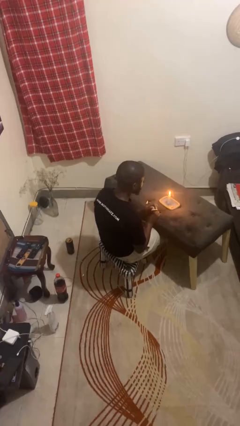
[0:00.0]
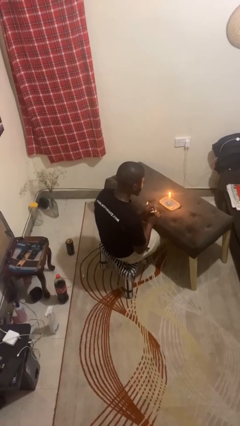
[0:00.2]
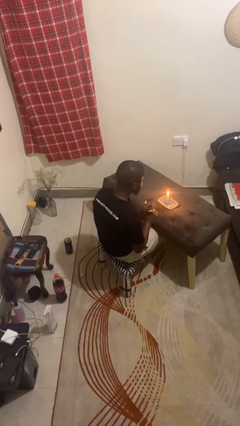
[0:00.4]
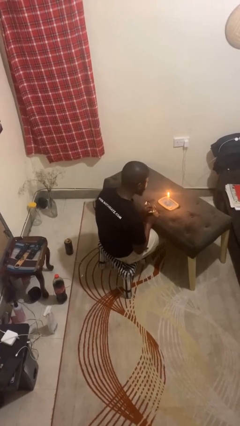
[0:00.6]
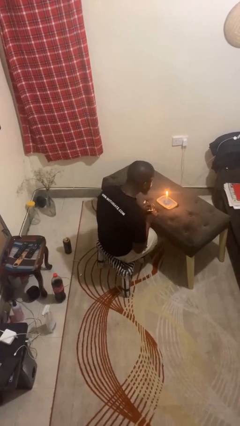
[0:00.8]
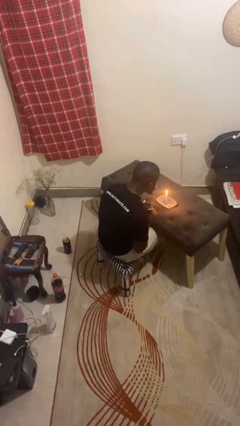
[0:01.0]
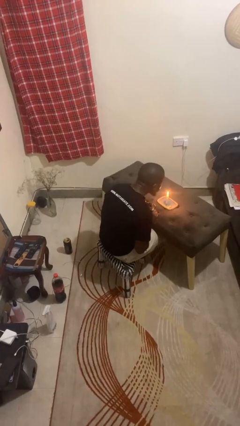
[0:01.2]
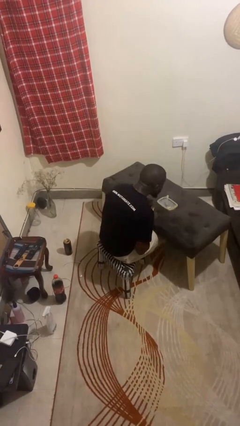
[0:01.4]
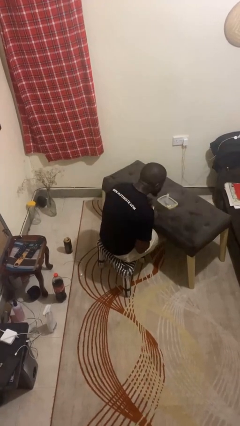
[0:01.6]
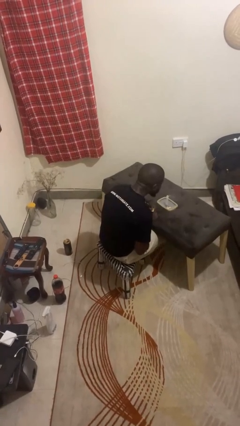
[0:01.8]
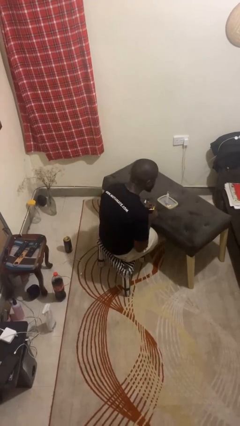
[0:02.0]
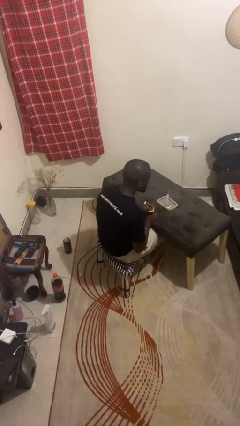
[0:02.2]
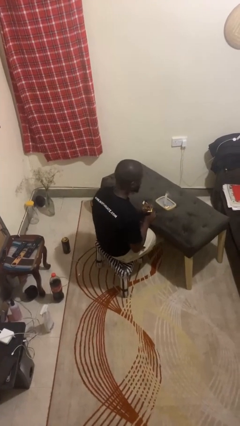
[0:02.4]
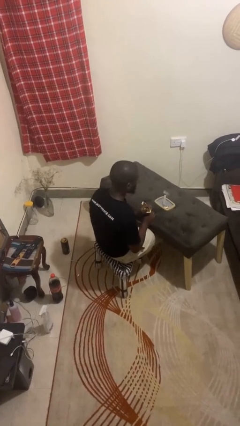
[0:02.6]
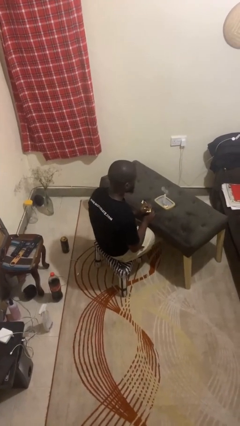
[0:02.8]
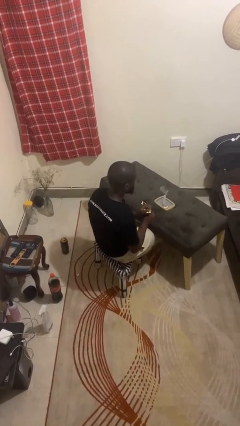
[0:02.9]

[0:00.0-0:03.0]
person extinguishes candle

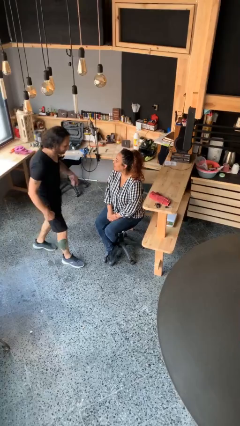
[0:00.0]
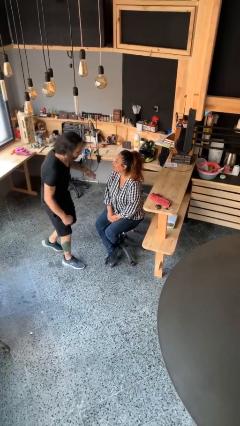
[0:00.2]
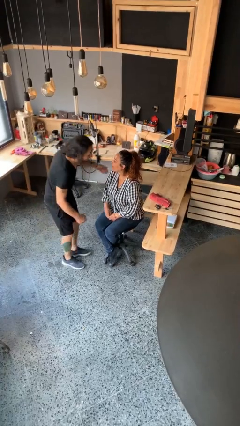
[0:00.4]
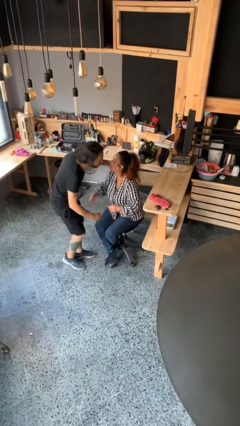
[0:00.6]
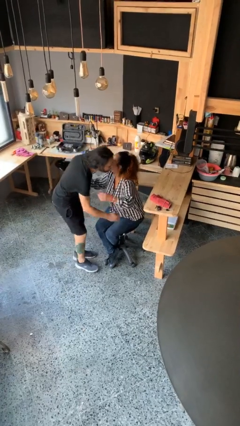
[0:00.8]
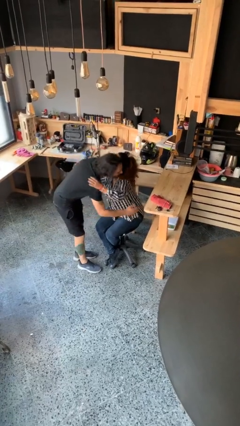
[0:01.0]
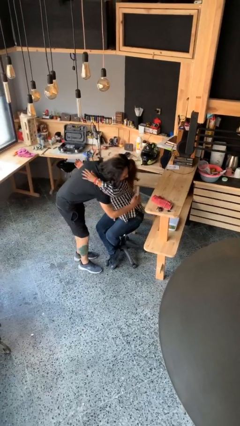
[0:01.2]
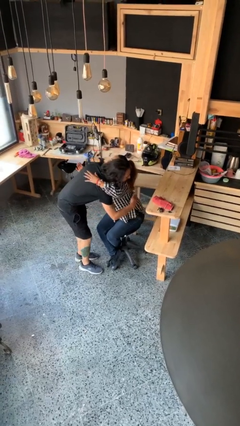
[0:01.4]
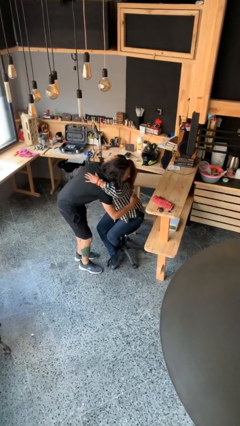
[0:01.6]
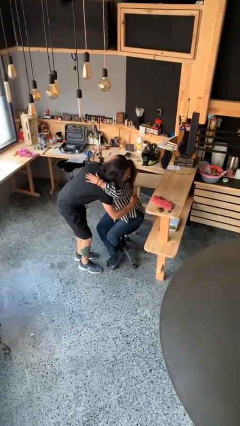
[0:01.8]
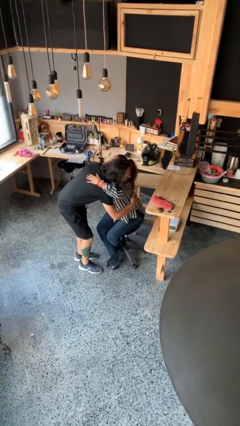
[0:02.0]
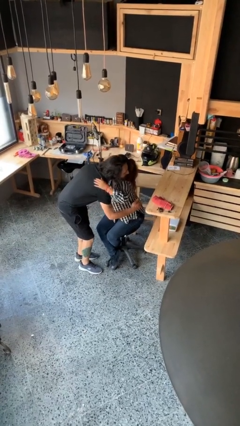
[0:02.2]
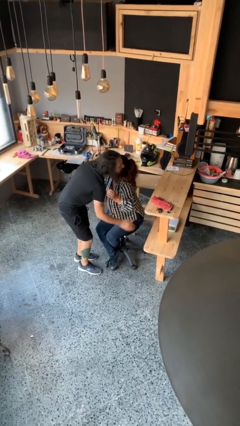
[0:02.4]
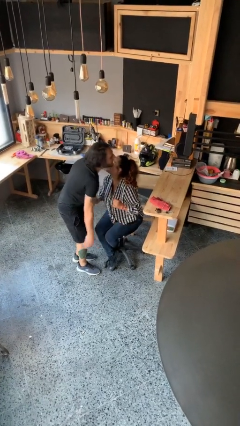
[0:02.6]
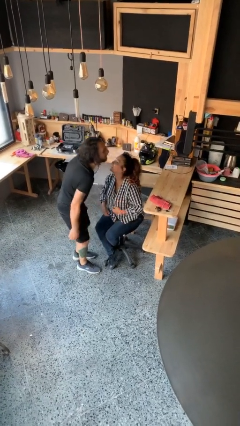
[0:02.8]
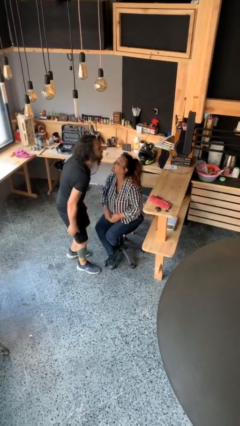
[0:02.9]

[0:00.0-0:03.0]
person embraces person

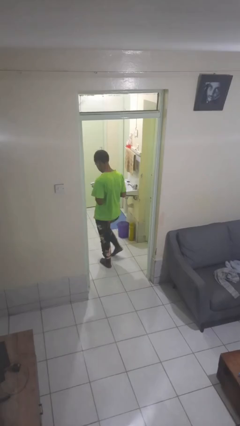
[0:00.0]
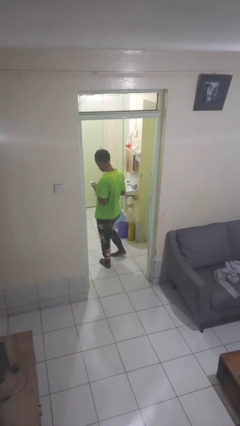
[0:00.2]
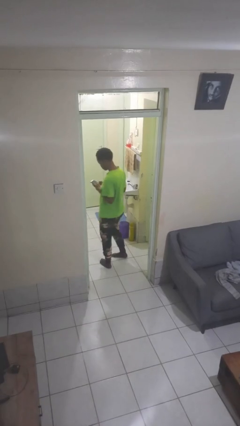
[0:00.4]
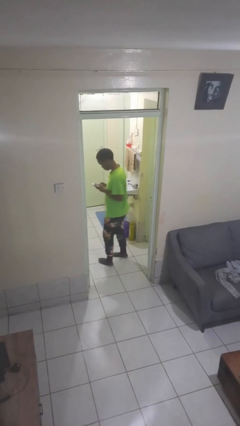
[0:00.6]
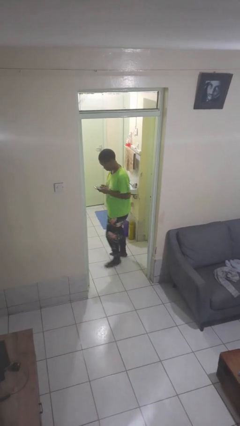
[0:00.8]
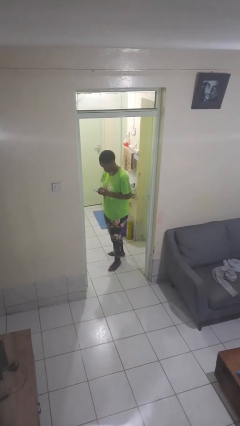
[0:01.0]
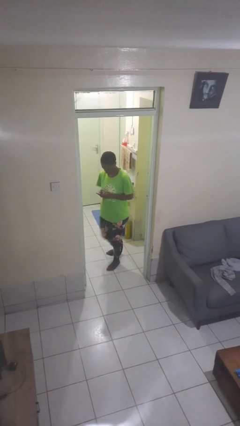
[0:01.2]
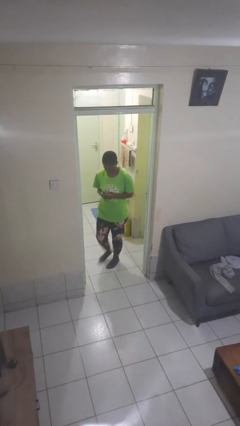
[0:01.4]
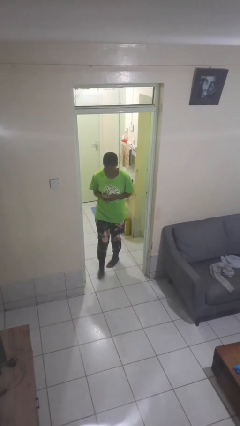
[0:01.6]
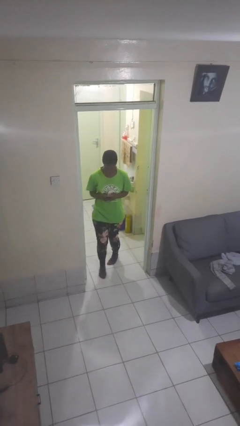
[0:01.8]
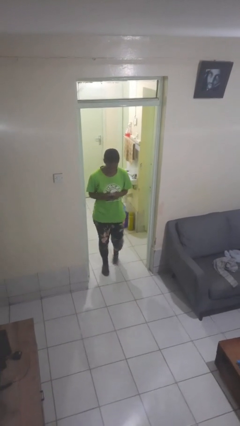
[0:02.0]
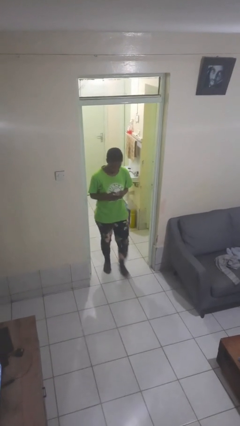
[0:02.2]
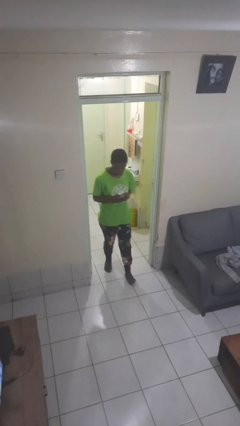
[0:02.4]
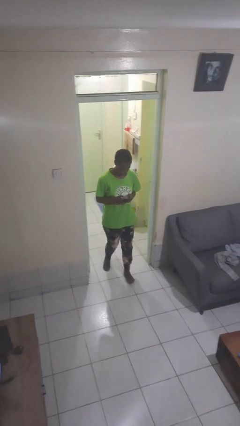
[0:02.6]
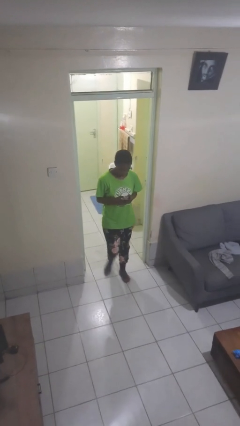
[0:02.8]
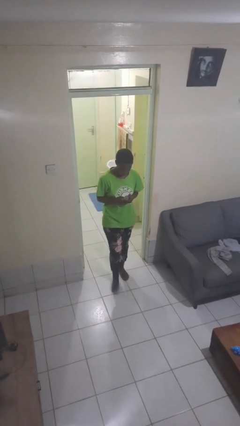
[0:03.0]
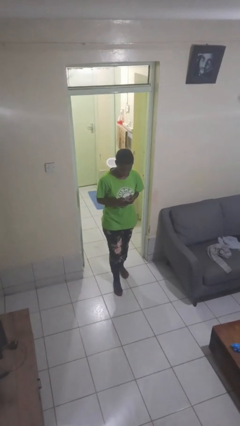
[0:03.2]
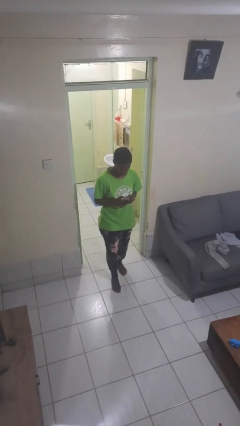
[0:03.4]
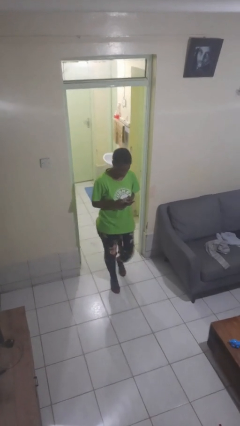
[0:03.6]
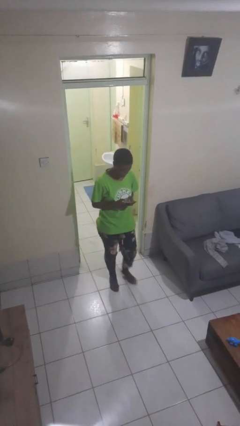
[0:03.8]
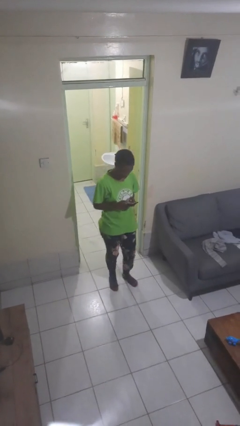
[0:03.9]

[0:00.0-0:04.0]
person enters scene through structure

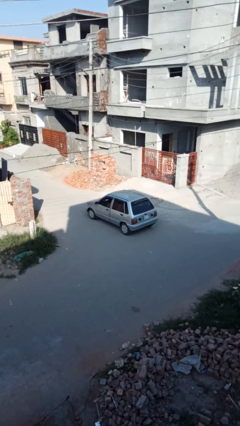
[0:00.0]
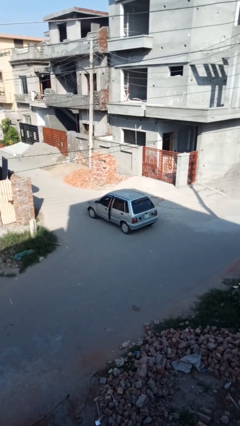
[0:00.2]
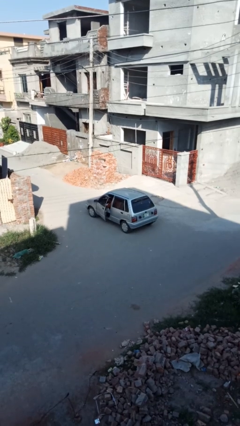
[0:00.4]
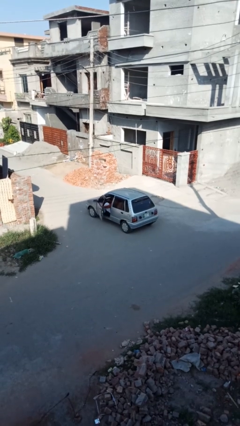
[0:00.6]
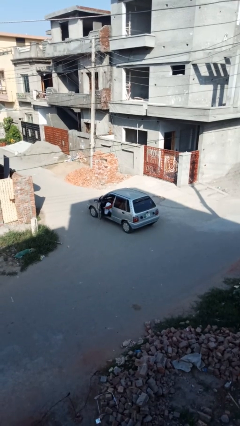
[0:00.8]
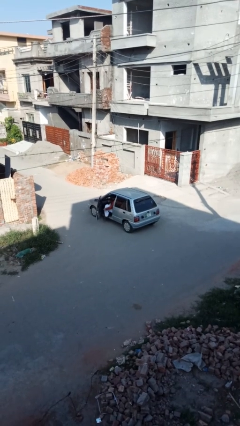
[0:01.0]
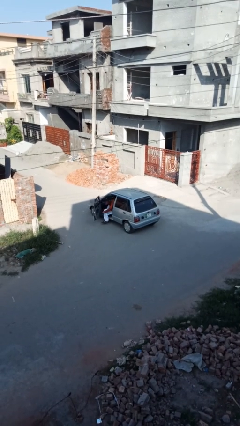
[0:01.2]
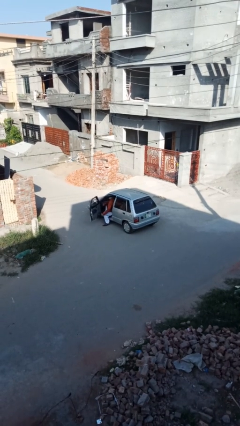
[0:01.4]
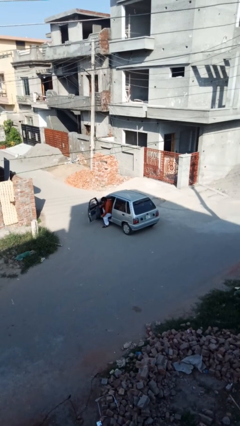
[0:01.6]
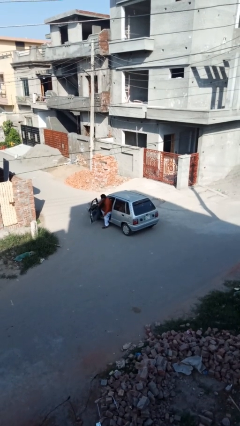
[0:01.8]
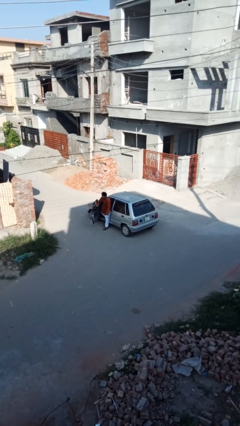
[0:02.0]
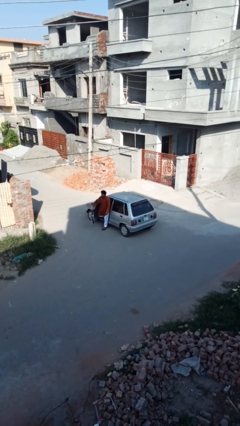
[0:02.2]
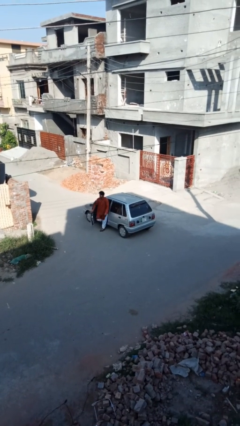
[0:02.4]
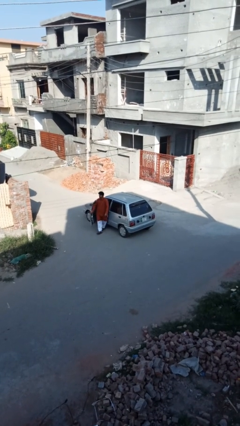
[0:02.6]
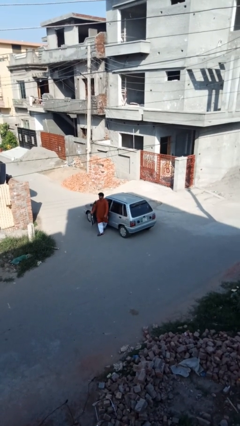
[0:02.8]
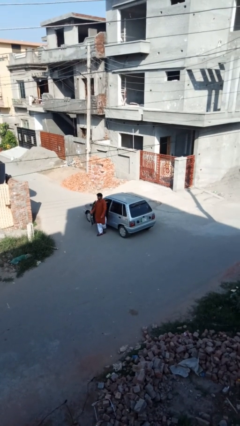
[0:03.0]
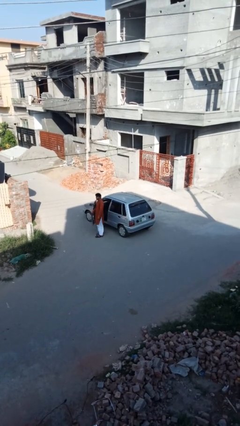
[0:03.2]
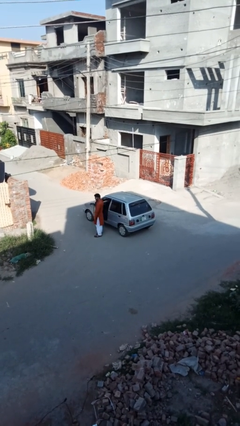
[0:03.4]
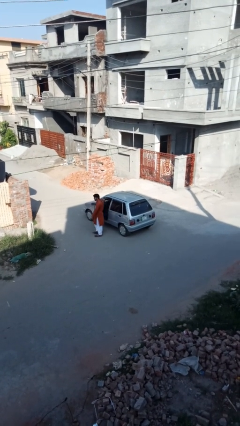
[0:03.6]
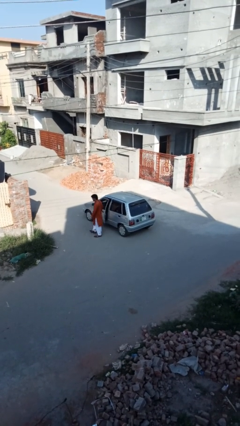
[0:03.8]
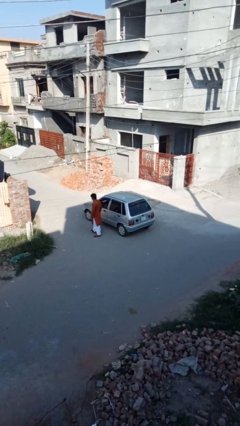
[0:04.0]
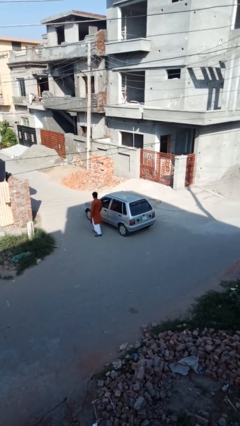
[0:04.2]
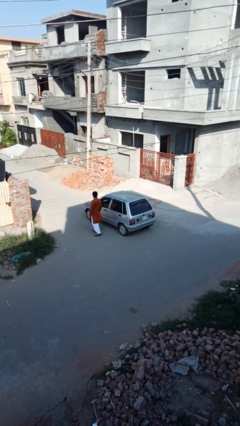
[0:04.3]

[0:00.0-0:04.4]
car drops off person

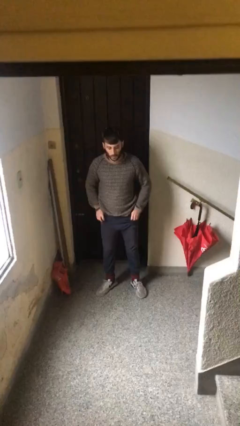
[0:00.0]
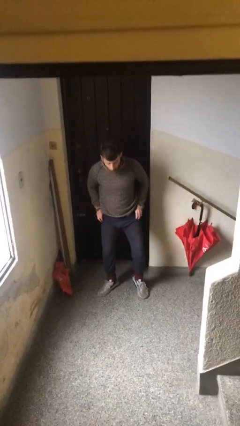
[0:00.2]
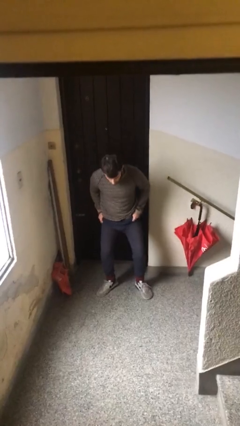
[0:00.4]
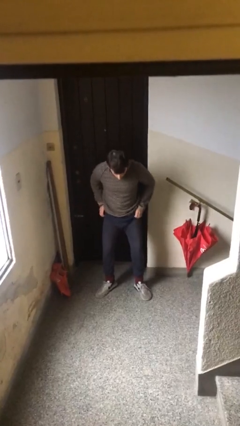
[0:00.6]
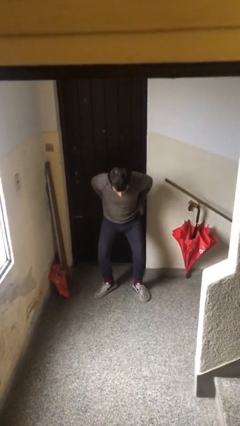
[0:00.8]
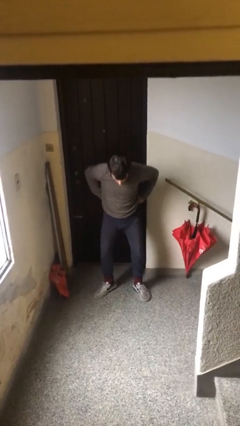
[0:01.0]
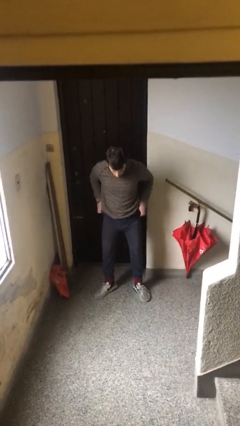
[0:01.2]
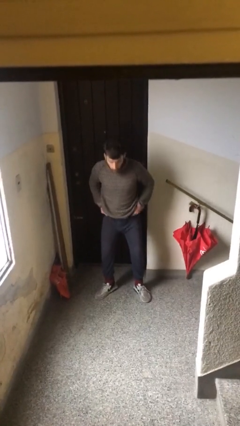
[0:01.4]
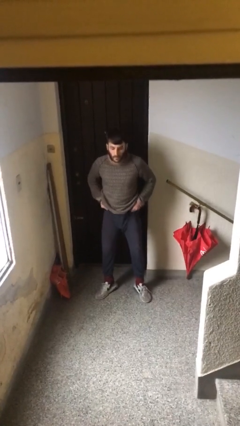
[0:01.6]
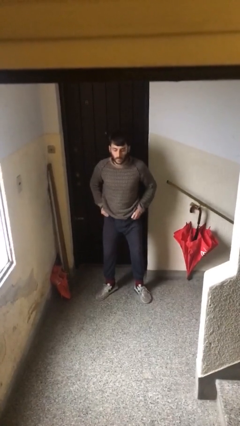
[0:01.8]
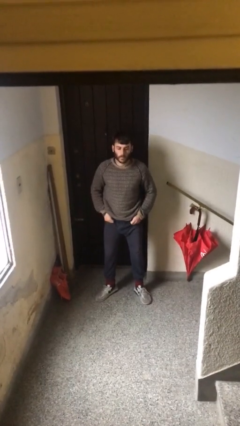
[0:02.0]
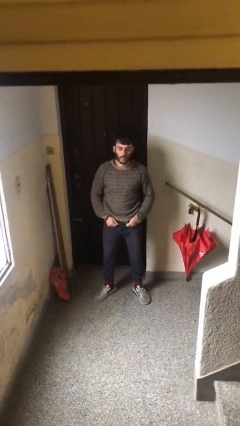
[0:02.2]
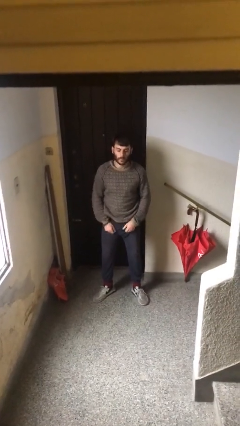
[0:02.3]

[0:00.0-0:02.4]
person hikes up pants

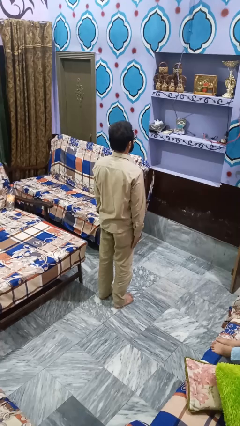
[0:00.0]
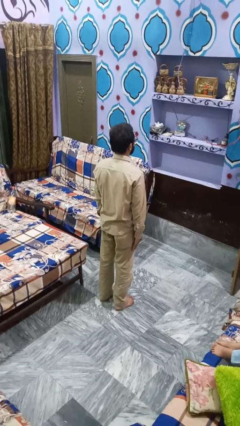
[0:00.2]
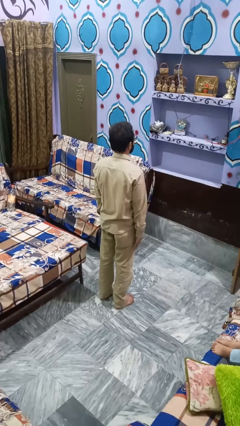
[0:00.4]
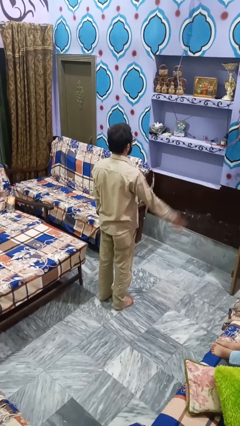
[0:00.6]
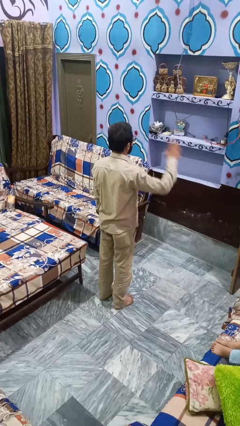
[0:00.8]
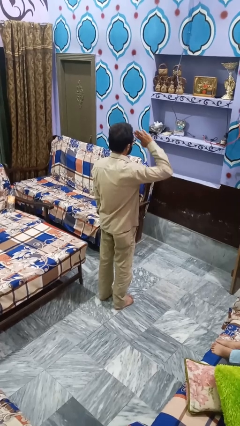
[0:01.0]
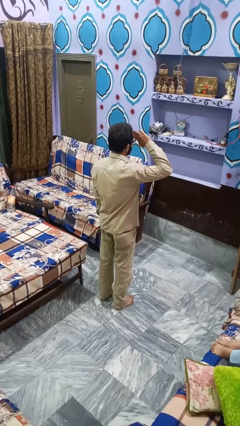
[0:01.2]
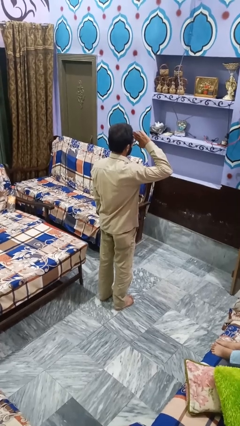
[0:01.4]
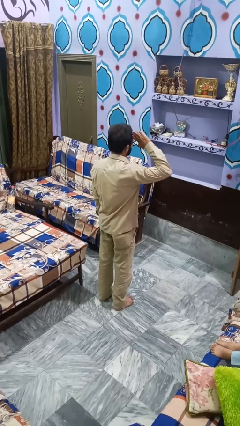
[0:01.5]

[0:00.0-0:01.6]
person salutes
